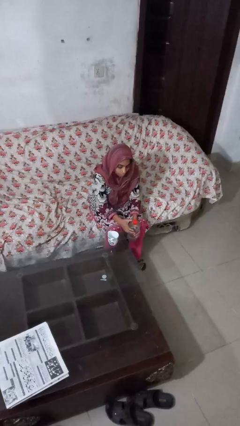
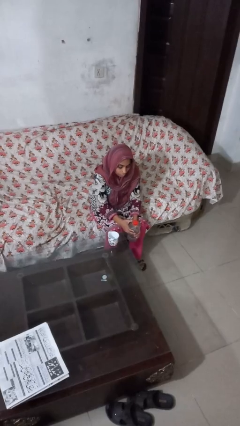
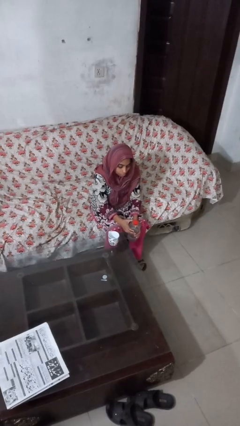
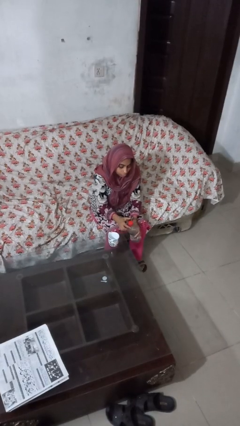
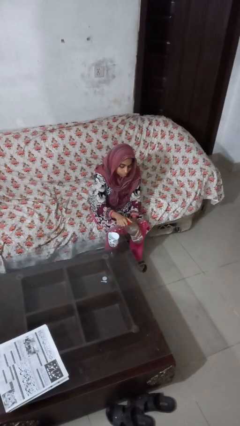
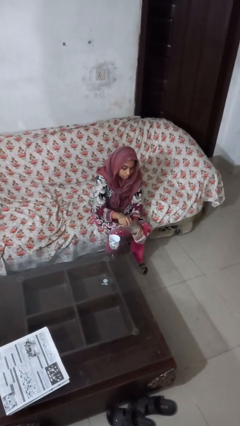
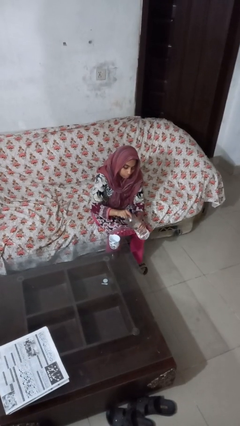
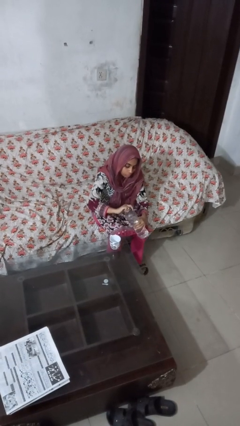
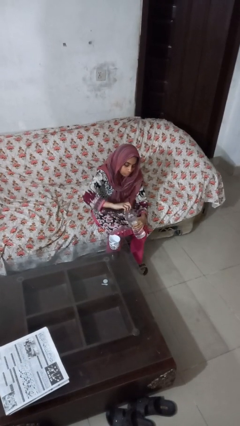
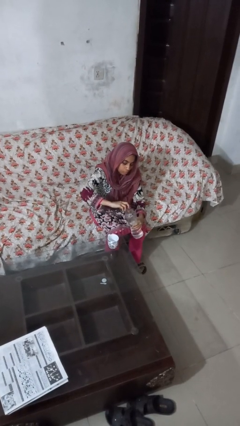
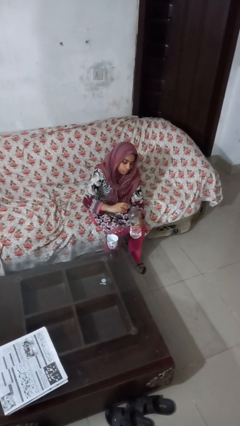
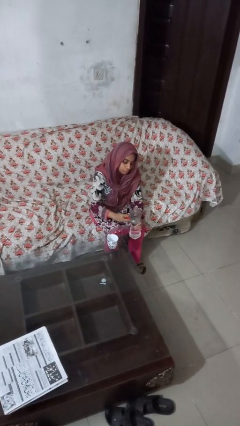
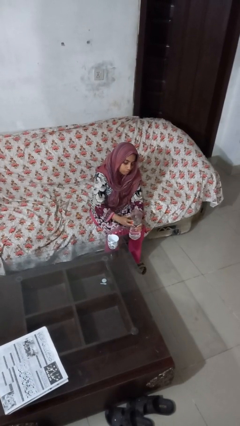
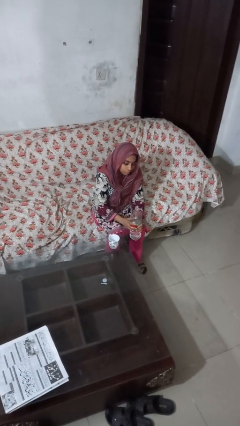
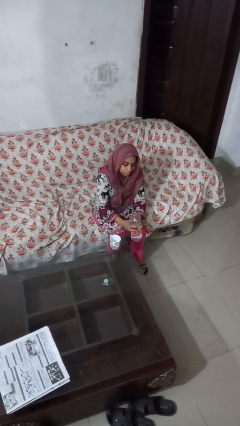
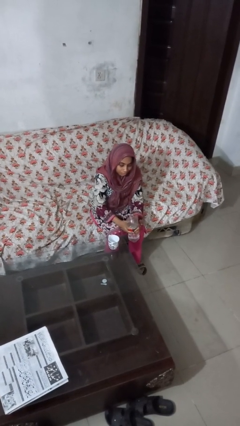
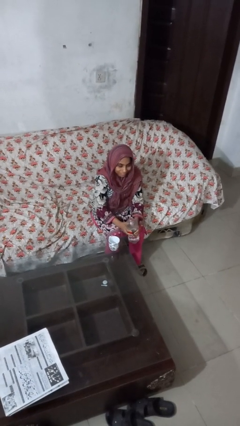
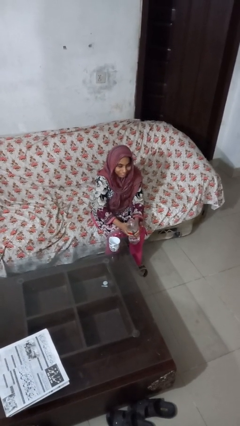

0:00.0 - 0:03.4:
person unscrews lid from bottle

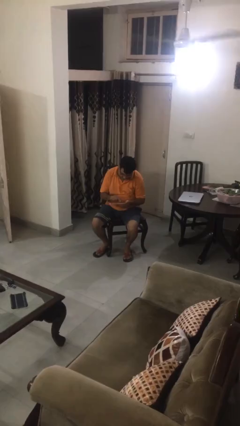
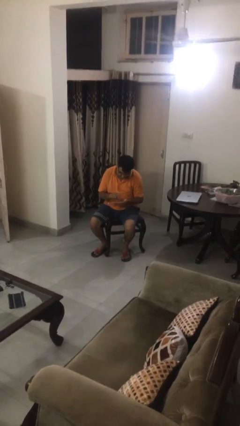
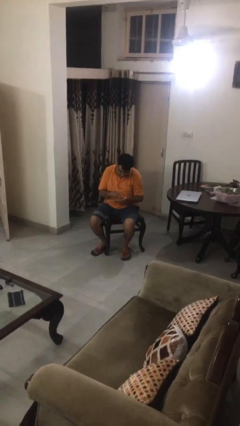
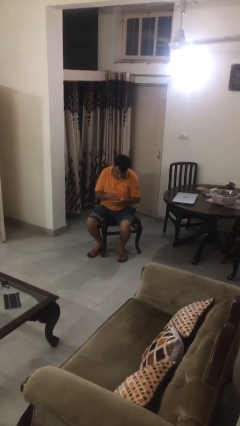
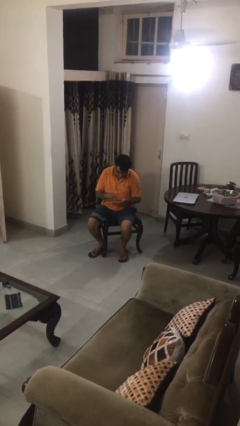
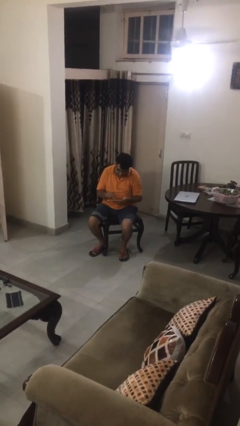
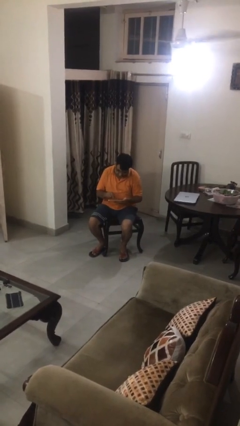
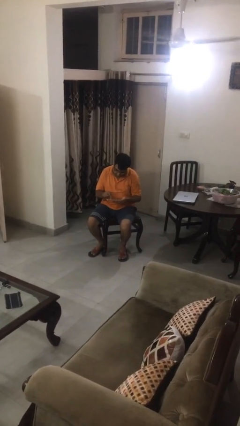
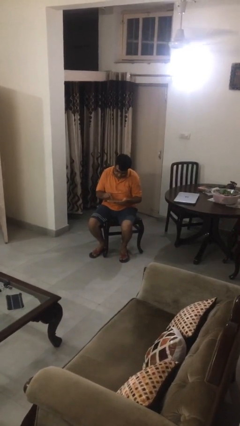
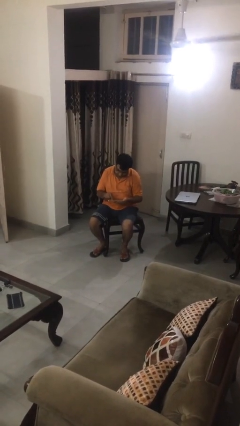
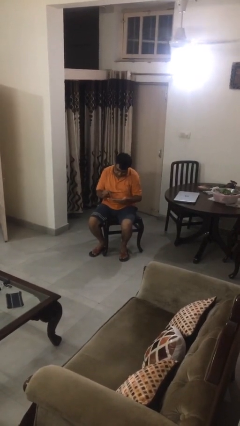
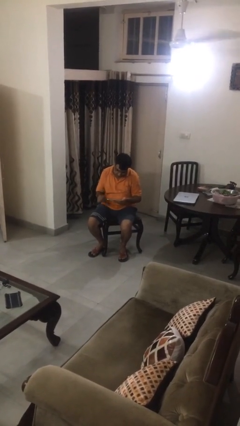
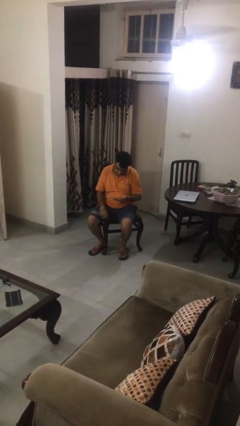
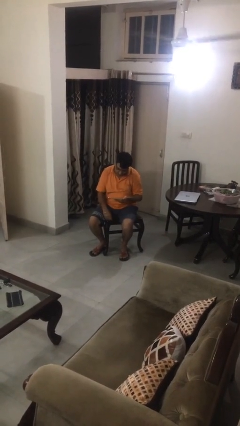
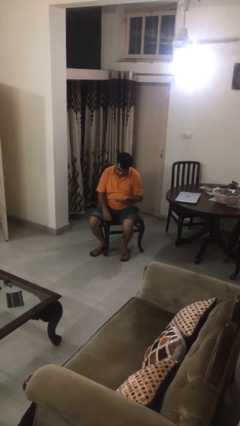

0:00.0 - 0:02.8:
person interacts with tablet

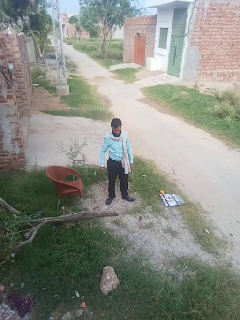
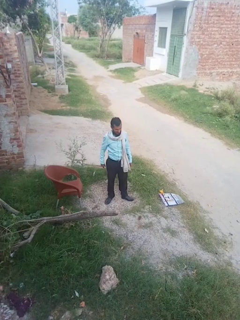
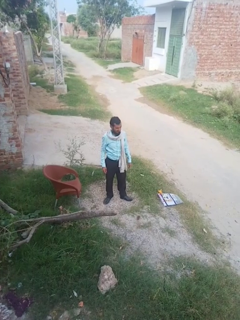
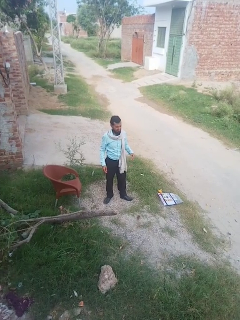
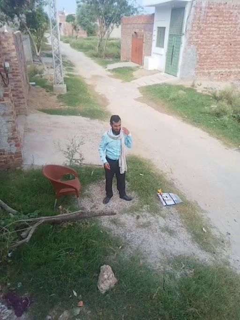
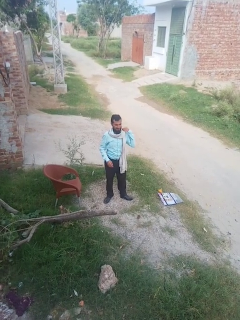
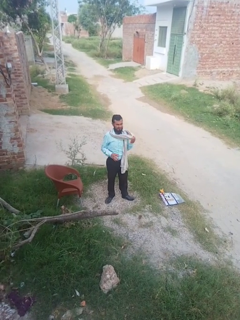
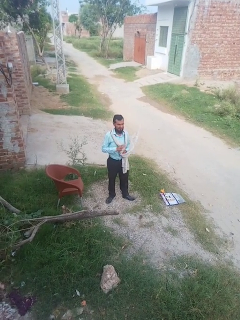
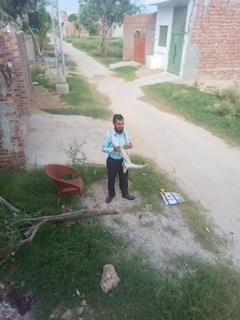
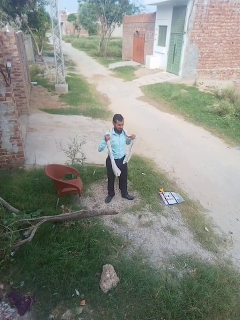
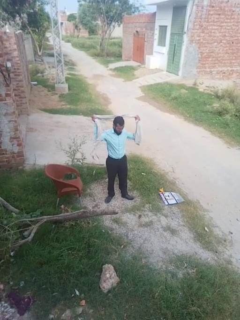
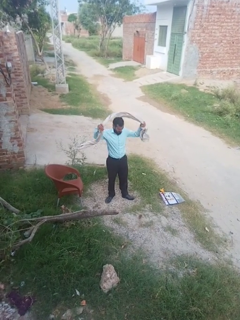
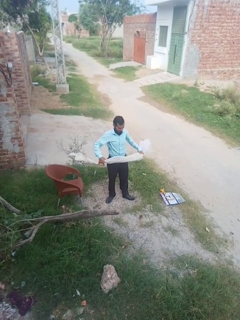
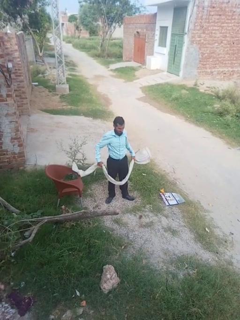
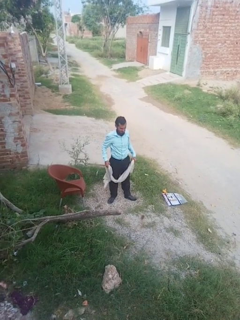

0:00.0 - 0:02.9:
person takes off scarf

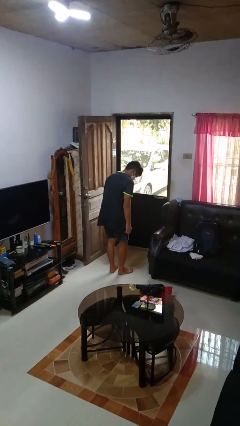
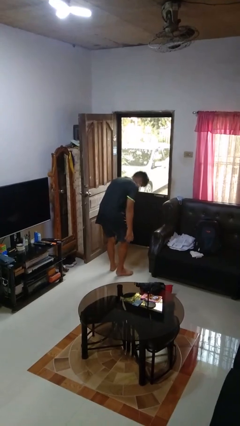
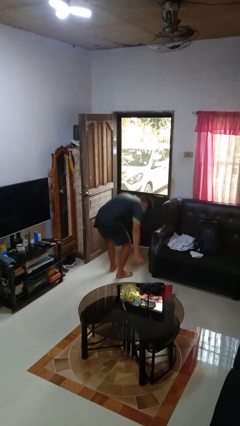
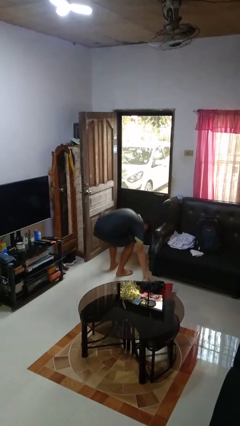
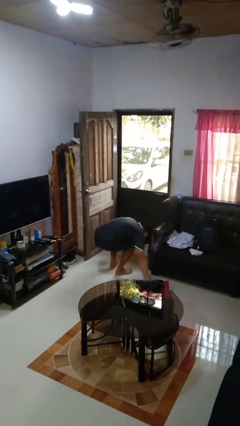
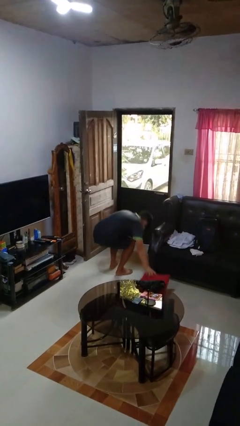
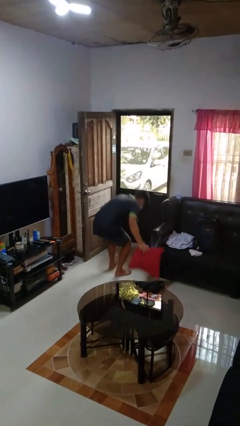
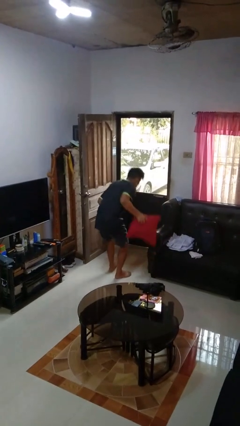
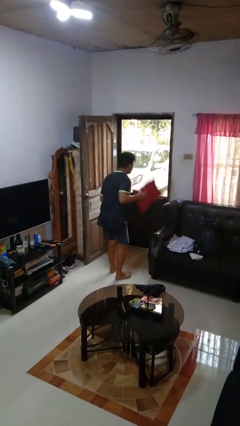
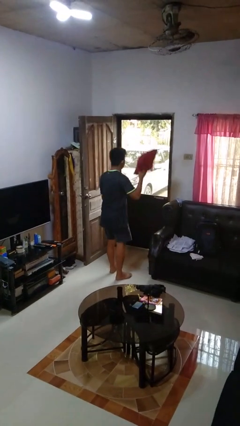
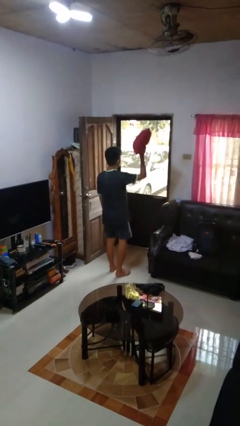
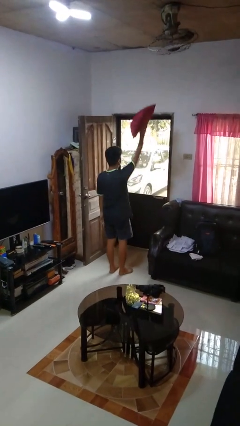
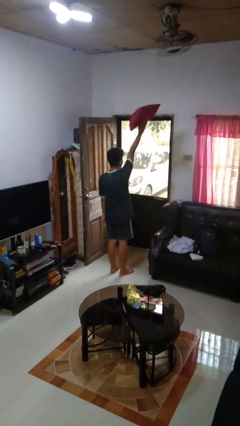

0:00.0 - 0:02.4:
person picks up object from floor

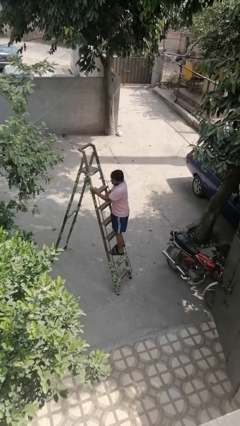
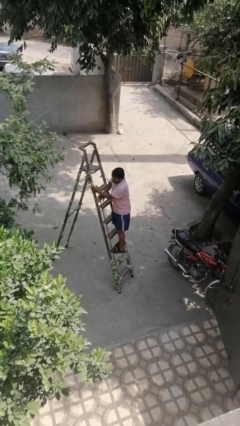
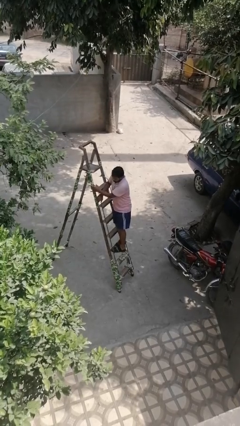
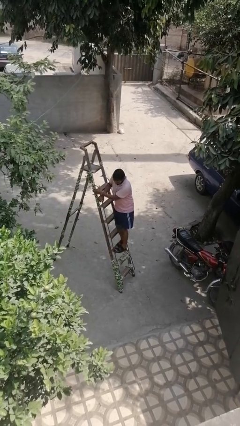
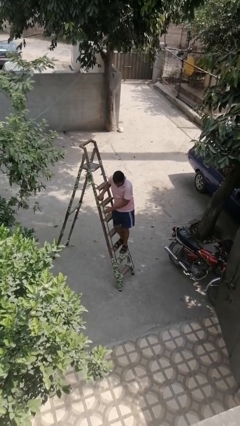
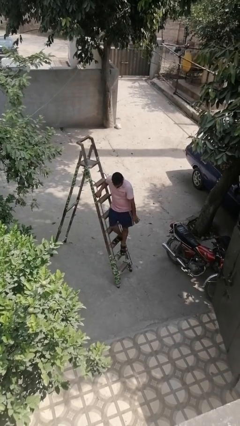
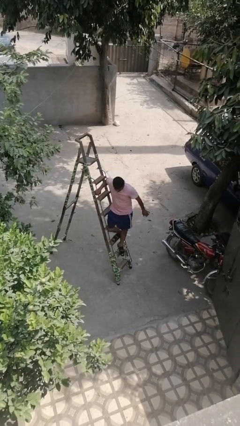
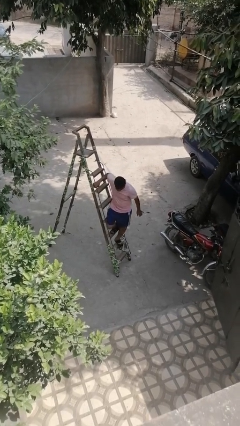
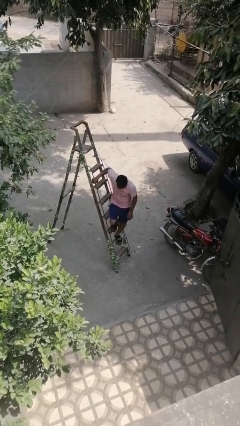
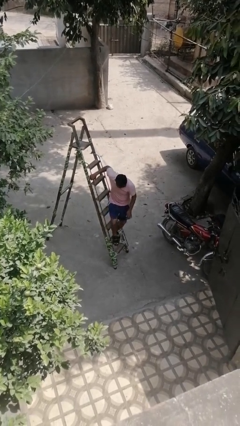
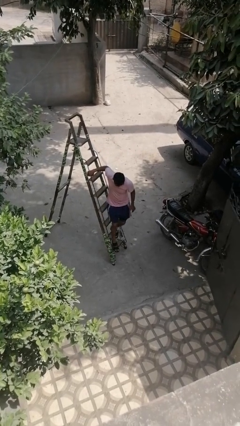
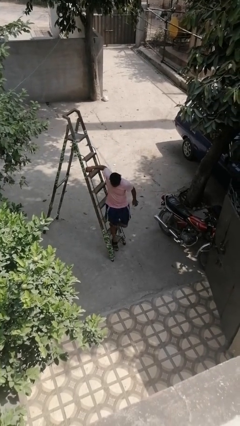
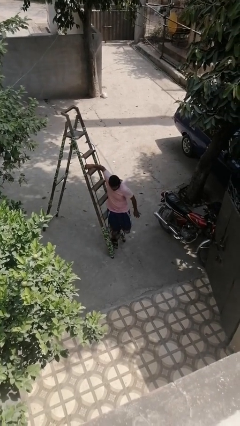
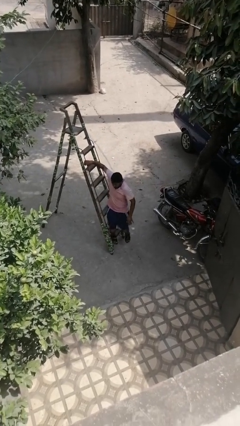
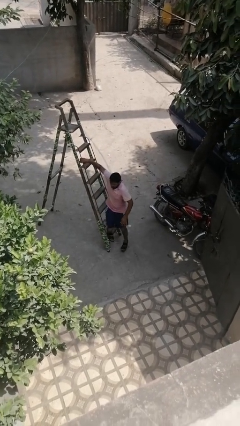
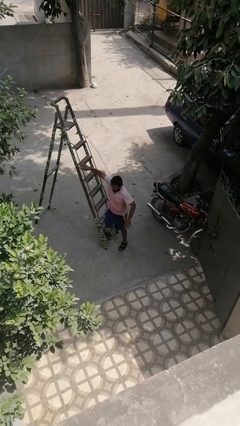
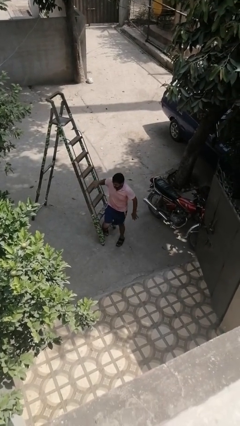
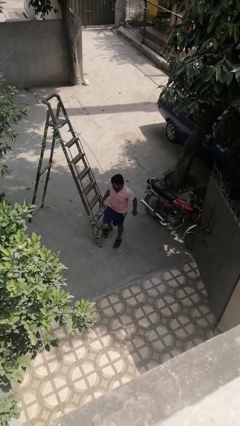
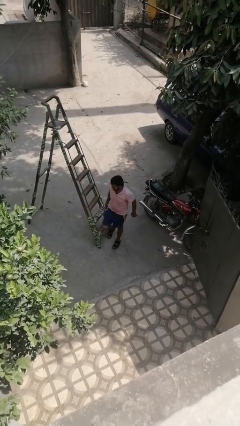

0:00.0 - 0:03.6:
person climbs down ladder

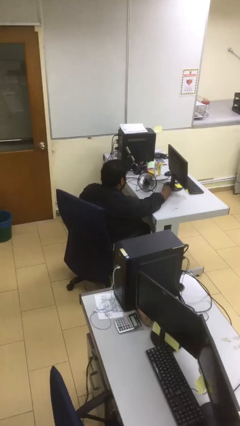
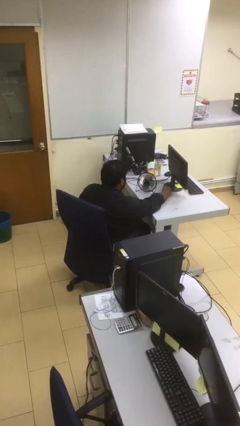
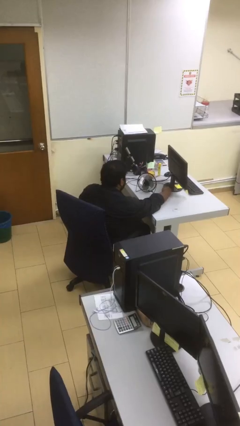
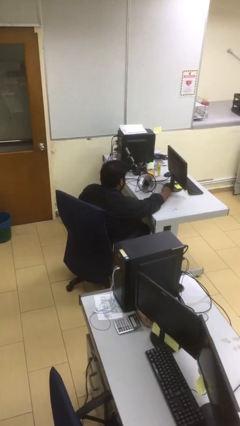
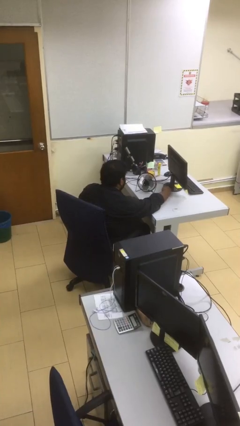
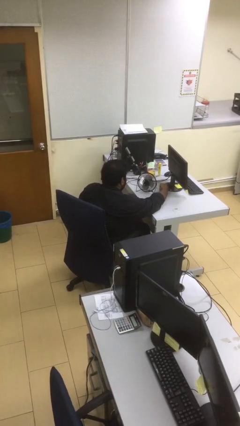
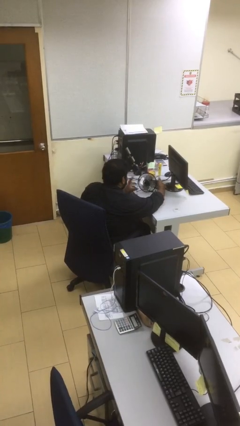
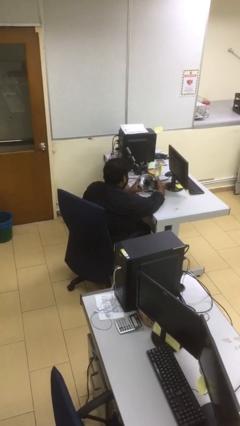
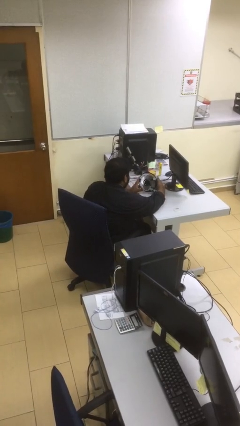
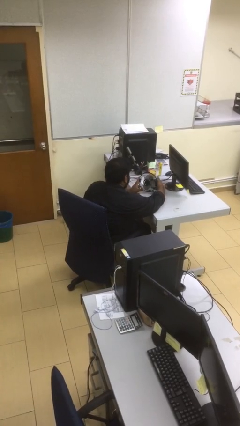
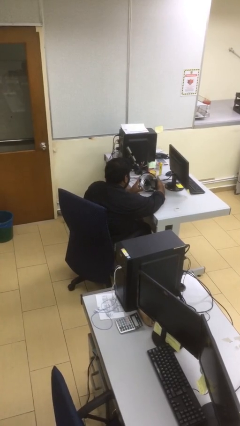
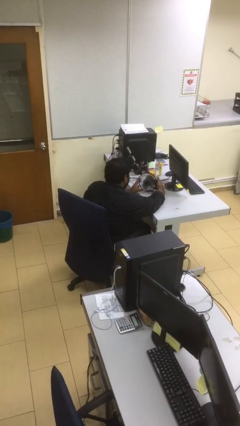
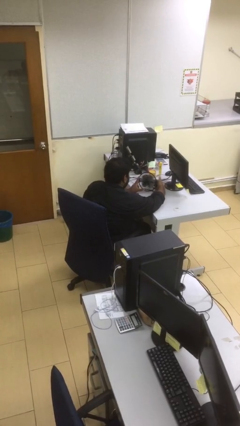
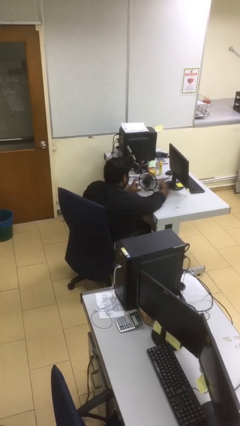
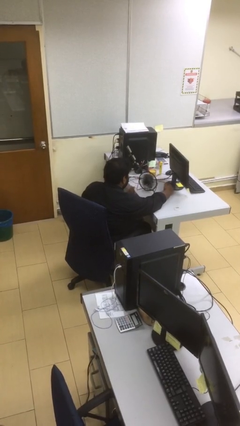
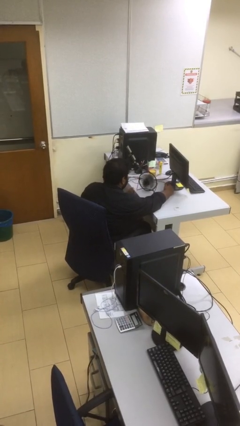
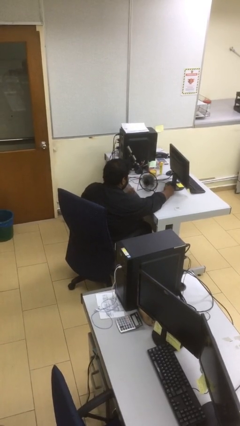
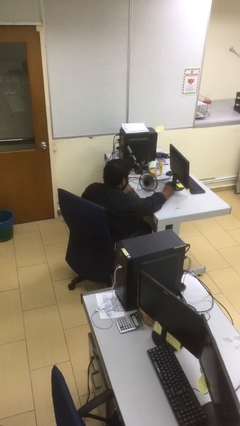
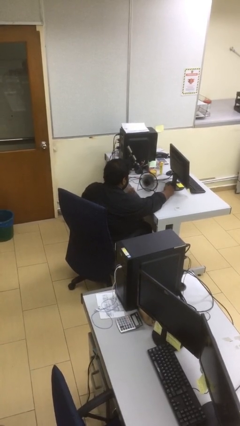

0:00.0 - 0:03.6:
person turns on fan
